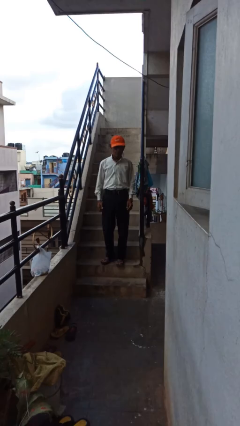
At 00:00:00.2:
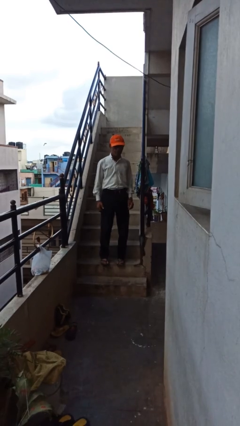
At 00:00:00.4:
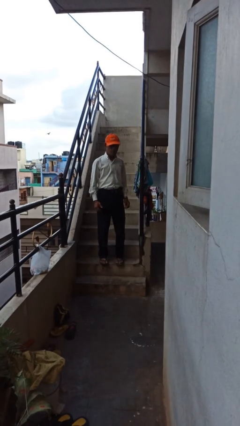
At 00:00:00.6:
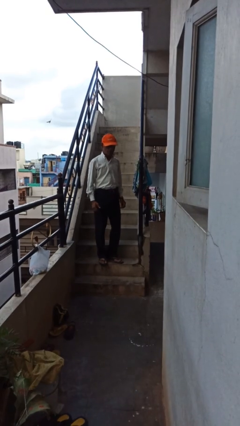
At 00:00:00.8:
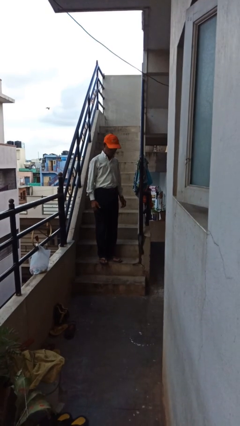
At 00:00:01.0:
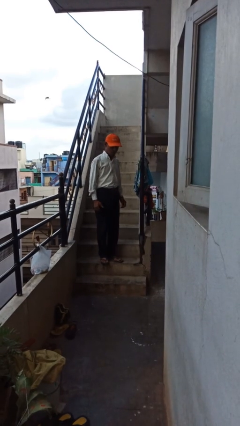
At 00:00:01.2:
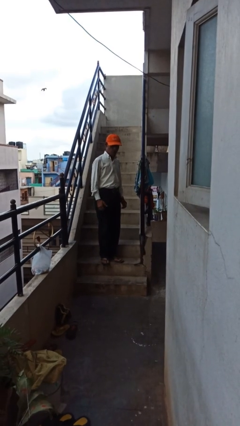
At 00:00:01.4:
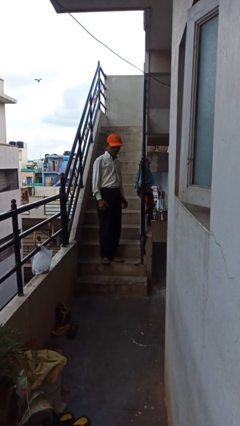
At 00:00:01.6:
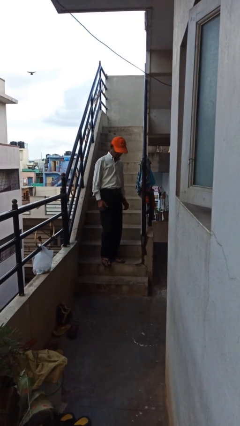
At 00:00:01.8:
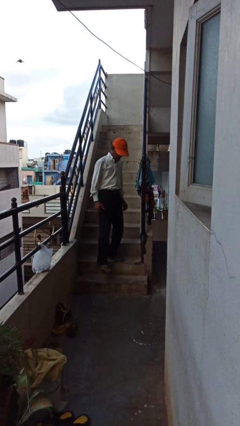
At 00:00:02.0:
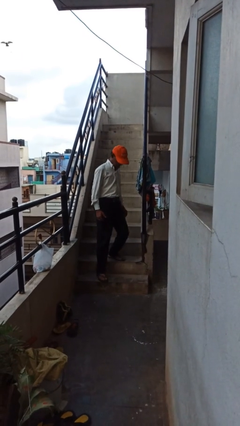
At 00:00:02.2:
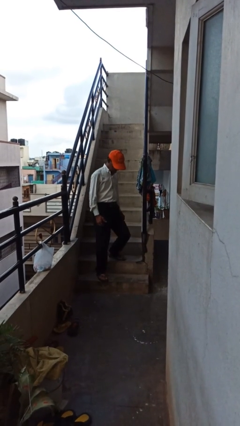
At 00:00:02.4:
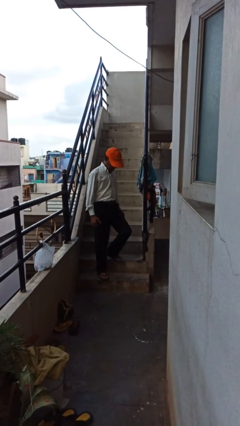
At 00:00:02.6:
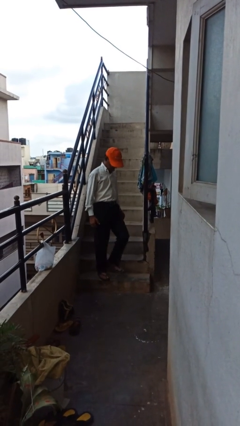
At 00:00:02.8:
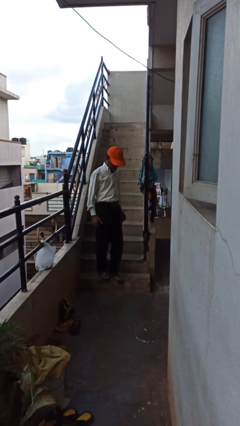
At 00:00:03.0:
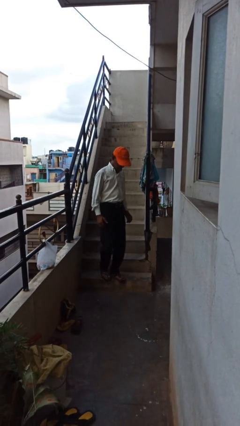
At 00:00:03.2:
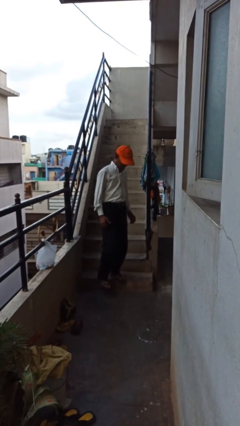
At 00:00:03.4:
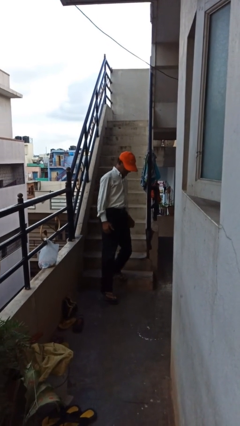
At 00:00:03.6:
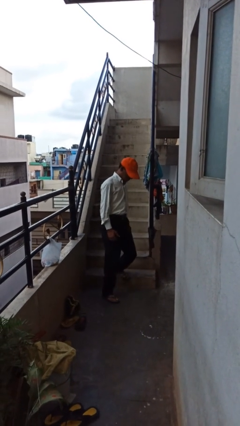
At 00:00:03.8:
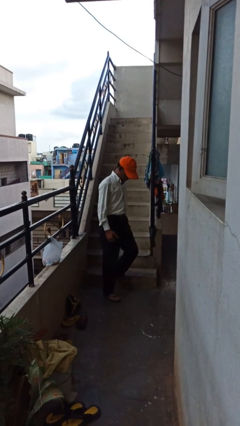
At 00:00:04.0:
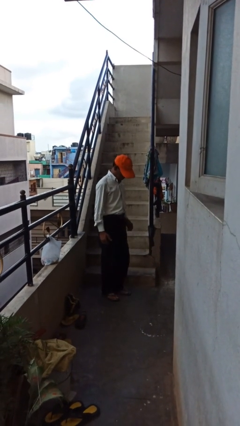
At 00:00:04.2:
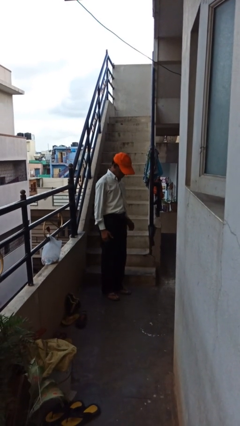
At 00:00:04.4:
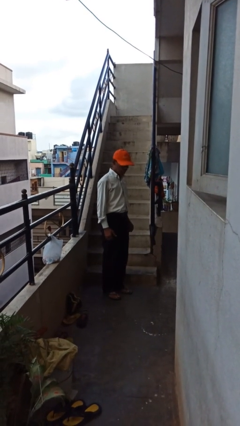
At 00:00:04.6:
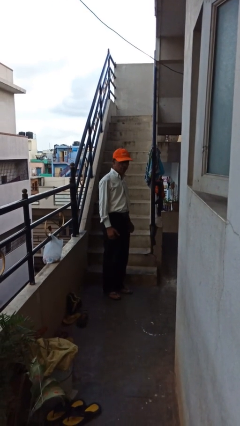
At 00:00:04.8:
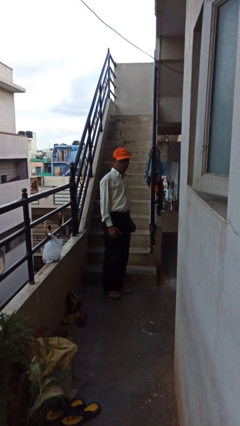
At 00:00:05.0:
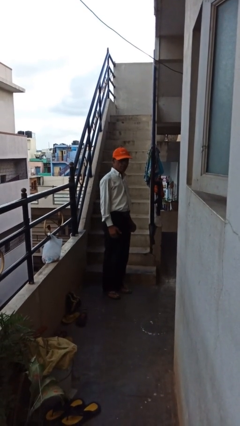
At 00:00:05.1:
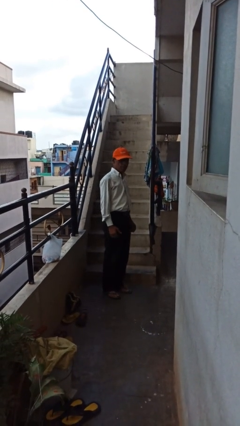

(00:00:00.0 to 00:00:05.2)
person climbs down stairs

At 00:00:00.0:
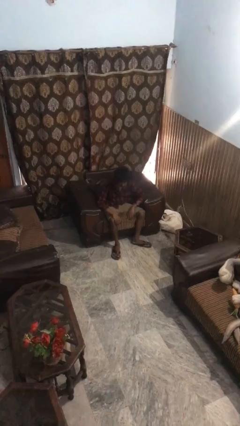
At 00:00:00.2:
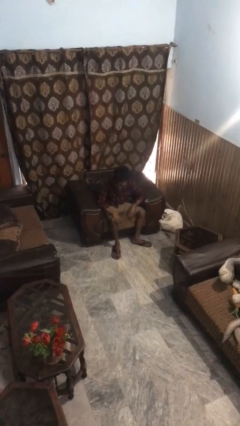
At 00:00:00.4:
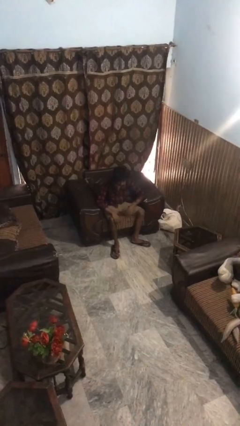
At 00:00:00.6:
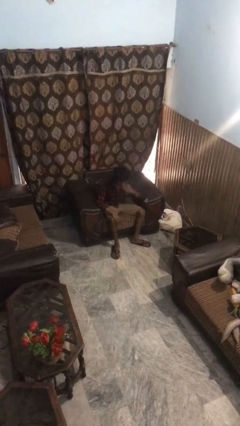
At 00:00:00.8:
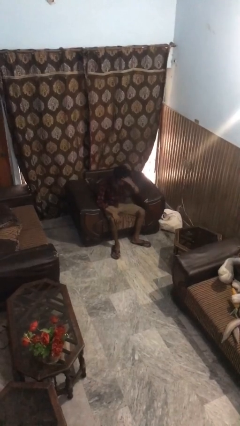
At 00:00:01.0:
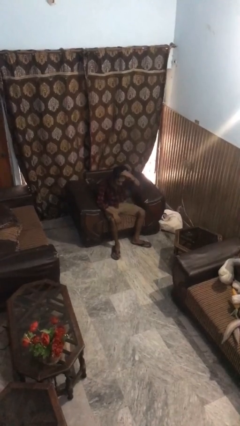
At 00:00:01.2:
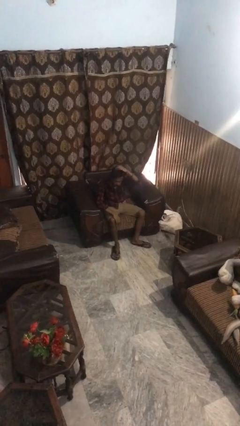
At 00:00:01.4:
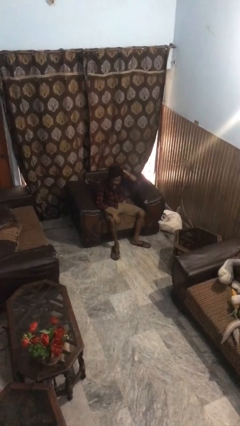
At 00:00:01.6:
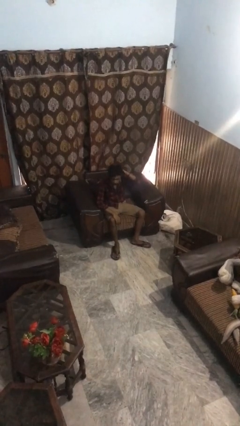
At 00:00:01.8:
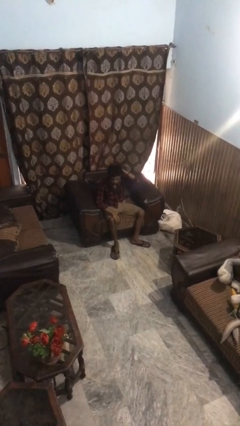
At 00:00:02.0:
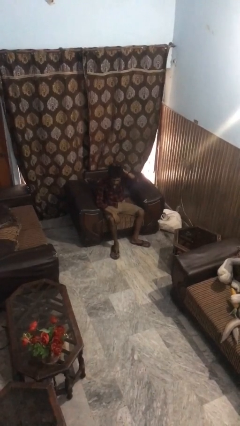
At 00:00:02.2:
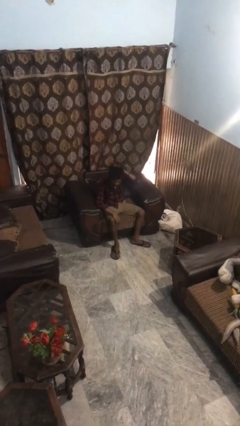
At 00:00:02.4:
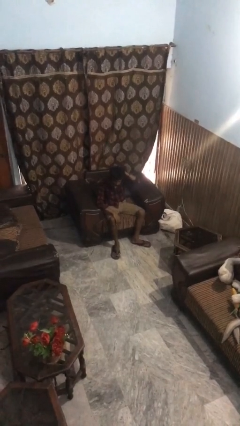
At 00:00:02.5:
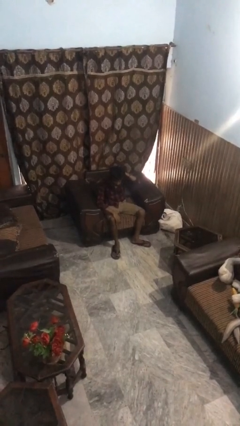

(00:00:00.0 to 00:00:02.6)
person strokes hair

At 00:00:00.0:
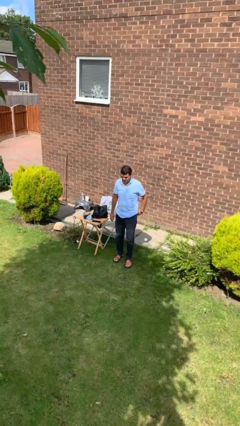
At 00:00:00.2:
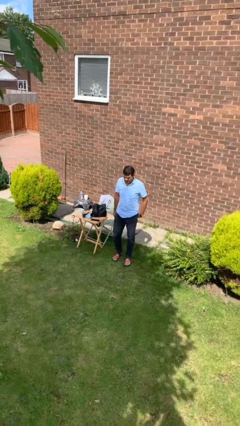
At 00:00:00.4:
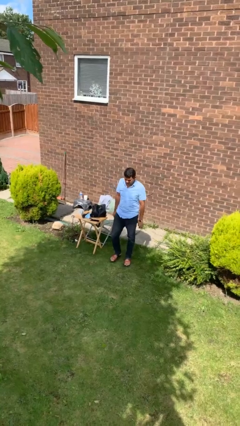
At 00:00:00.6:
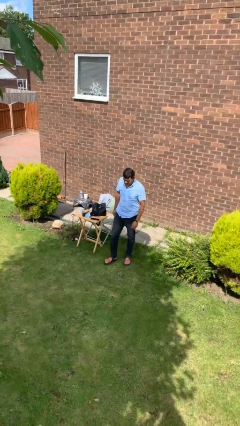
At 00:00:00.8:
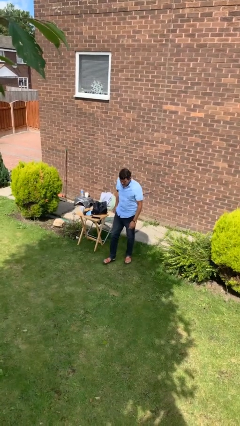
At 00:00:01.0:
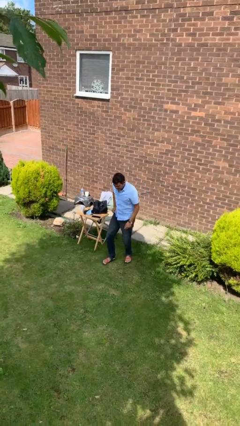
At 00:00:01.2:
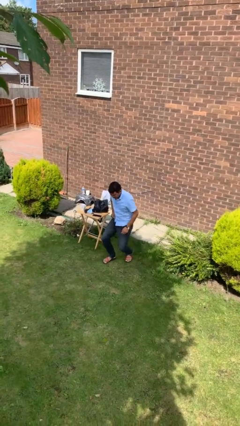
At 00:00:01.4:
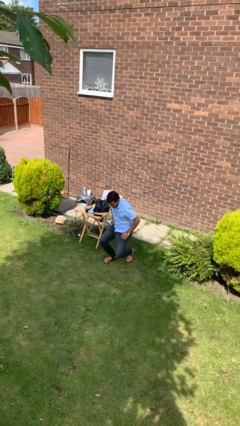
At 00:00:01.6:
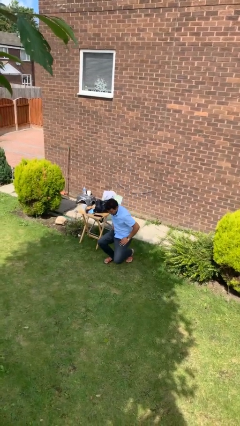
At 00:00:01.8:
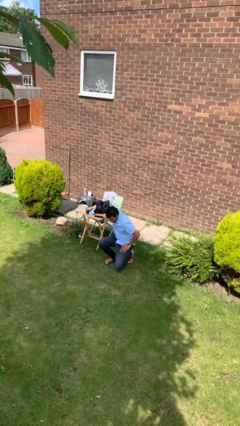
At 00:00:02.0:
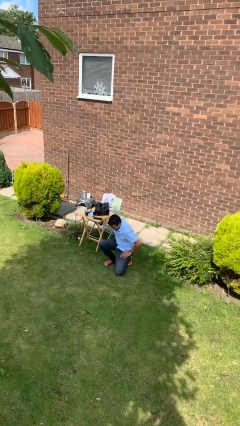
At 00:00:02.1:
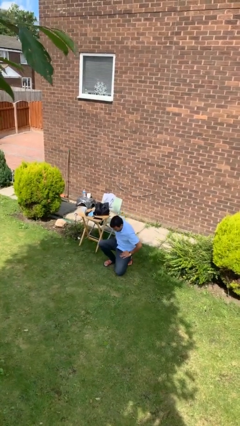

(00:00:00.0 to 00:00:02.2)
person kneels

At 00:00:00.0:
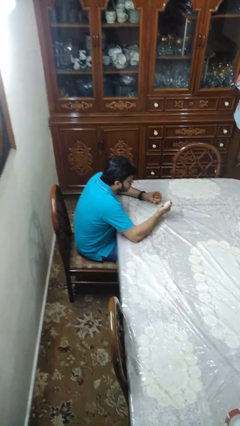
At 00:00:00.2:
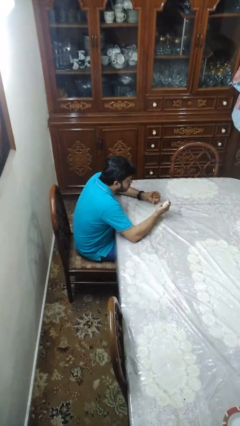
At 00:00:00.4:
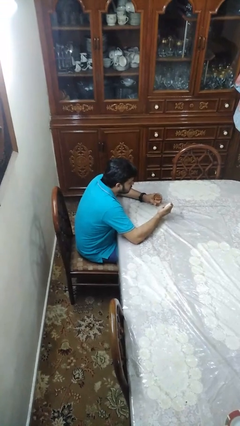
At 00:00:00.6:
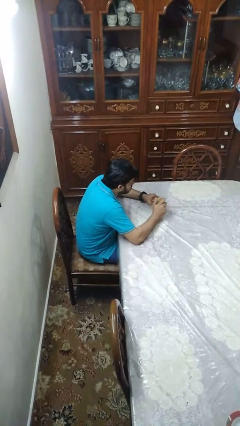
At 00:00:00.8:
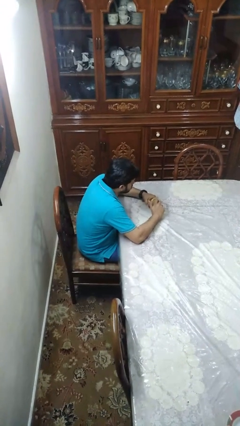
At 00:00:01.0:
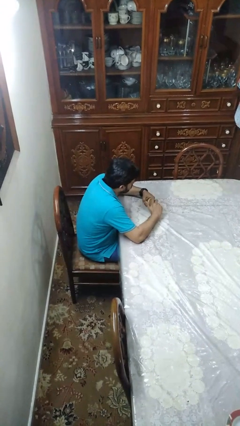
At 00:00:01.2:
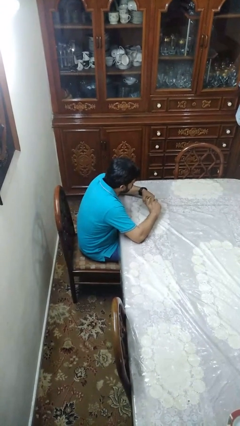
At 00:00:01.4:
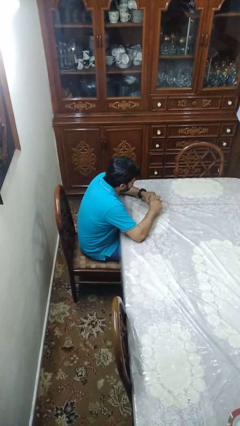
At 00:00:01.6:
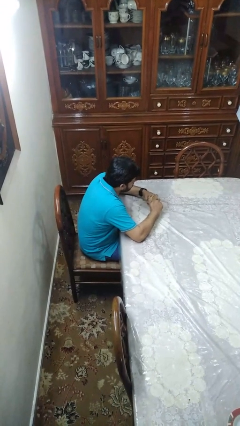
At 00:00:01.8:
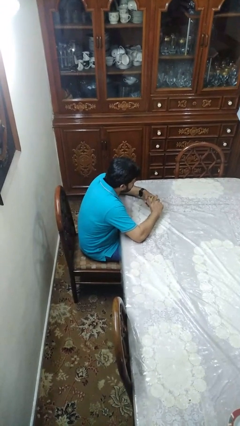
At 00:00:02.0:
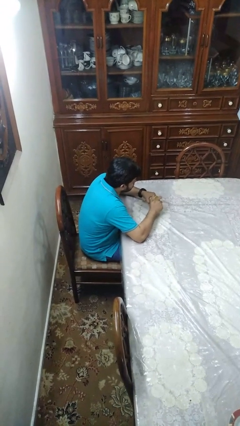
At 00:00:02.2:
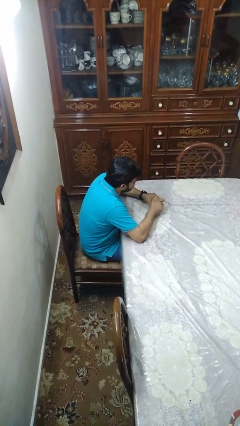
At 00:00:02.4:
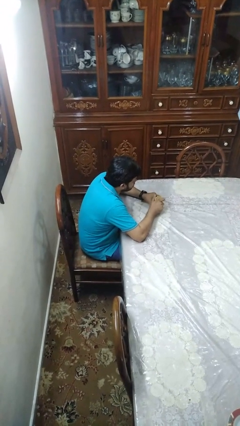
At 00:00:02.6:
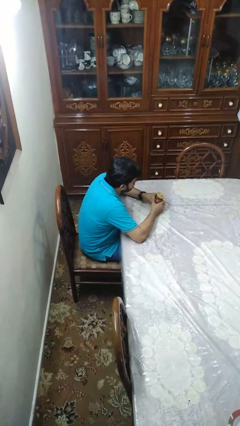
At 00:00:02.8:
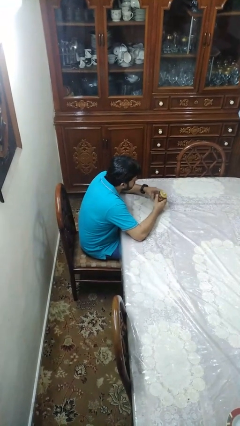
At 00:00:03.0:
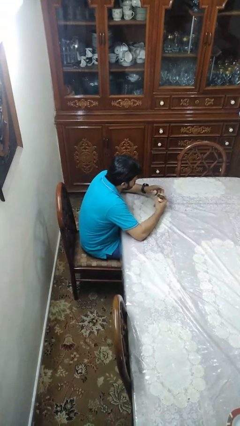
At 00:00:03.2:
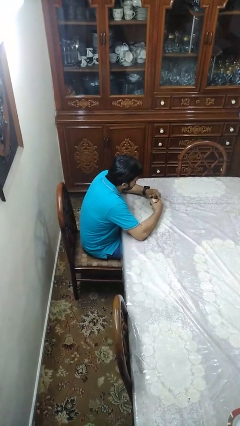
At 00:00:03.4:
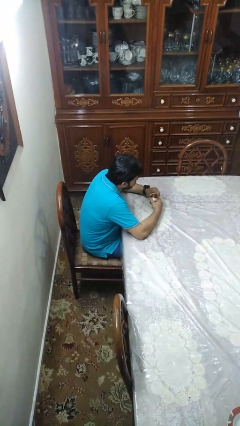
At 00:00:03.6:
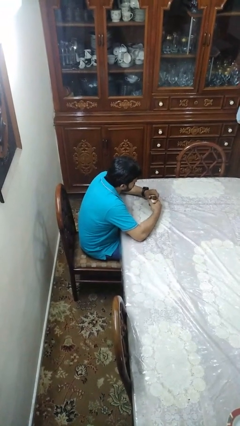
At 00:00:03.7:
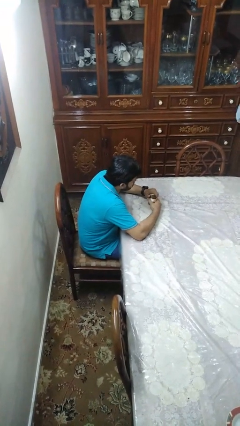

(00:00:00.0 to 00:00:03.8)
person closes jar

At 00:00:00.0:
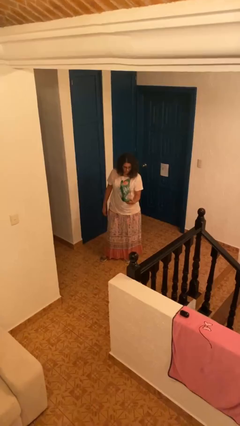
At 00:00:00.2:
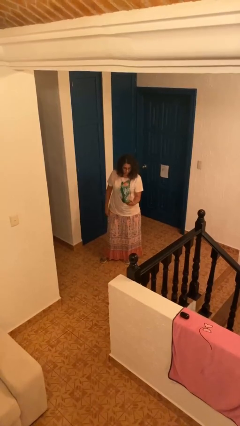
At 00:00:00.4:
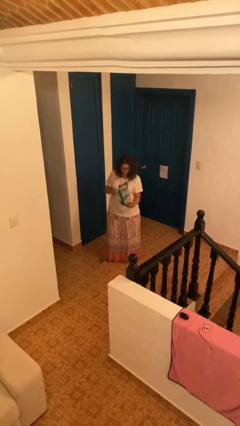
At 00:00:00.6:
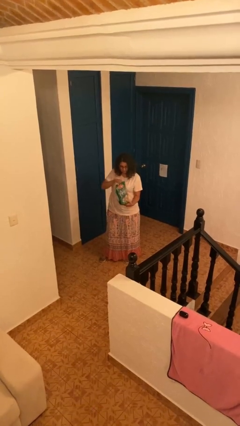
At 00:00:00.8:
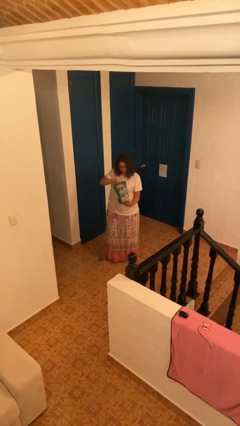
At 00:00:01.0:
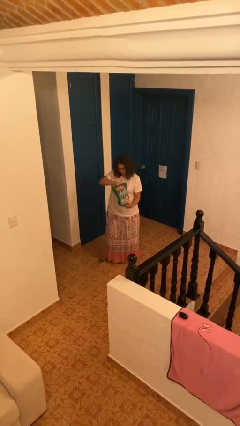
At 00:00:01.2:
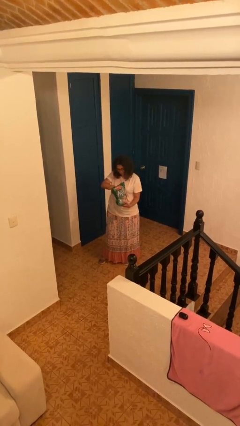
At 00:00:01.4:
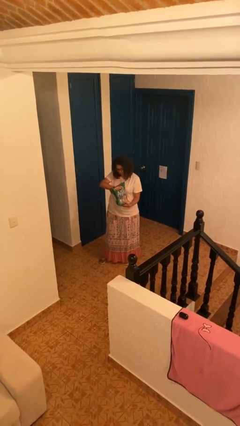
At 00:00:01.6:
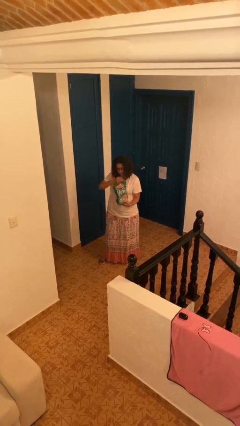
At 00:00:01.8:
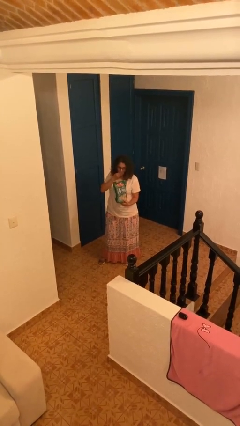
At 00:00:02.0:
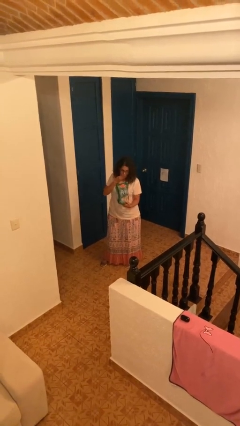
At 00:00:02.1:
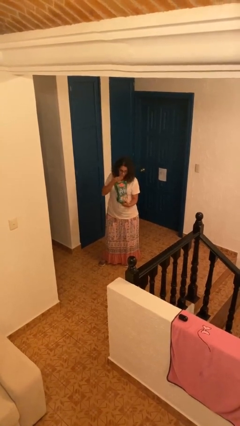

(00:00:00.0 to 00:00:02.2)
person eats snack from bag

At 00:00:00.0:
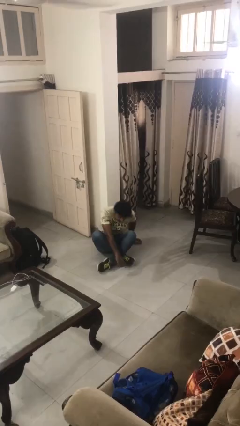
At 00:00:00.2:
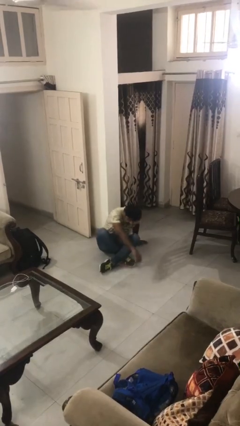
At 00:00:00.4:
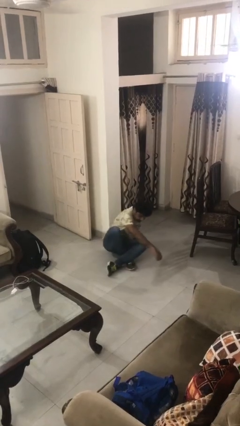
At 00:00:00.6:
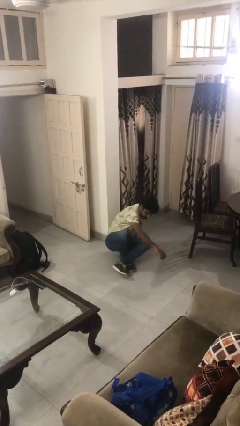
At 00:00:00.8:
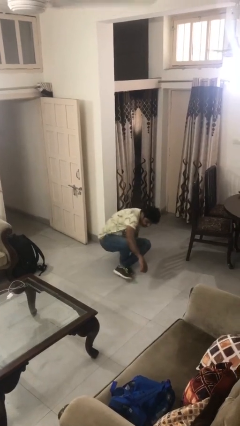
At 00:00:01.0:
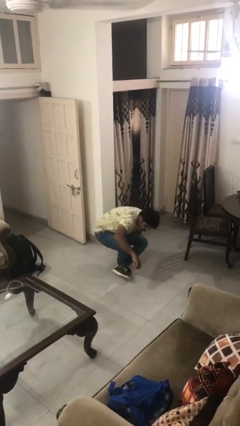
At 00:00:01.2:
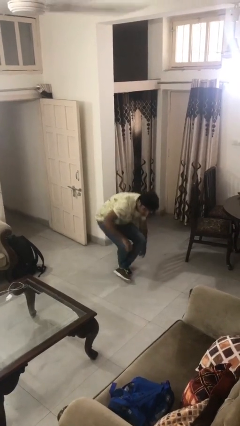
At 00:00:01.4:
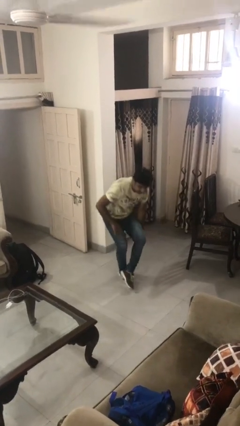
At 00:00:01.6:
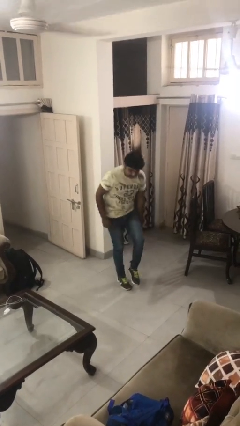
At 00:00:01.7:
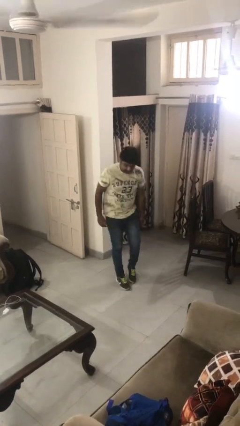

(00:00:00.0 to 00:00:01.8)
person stands up from floor
